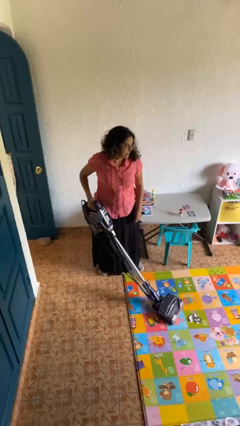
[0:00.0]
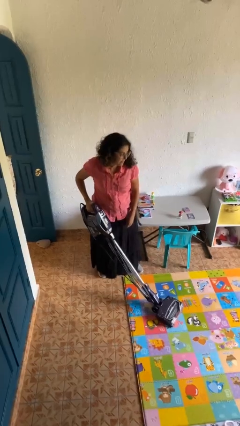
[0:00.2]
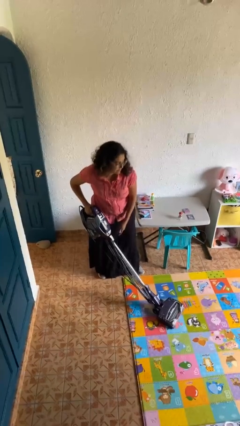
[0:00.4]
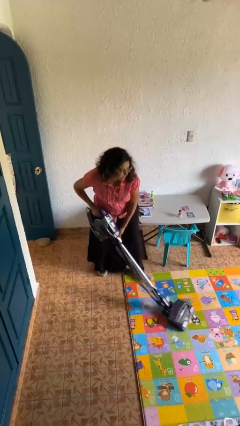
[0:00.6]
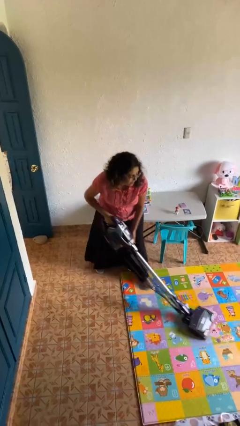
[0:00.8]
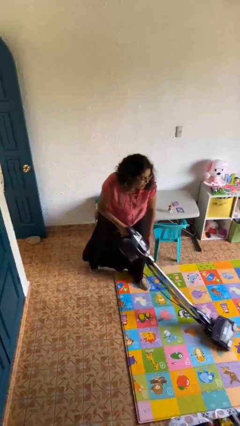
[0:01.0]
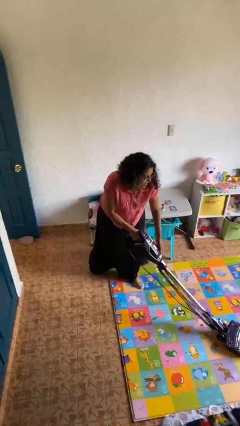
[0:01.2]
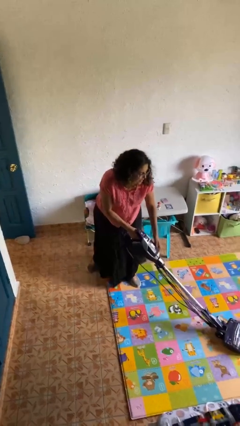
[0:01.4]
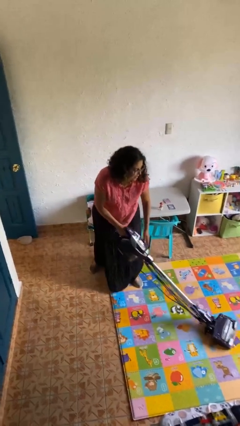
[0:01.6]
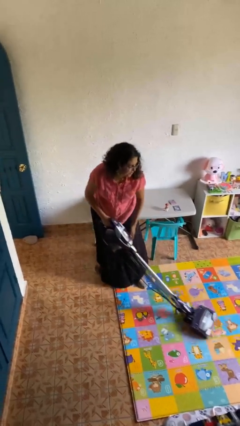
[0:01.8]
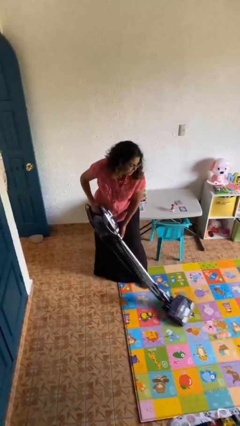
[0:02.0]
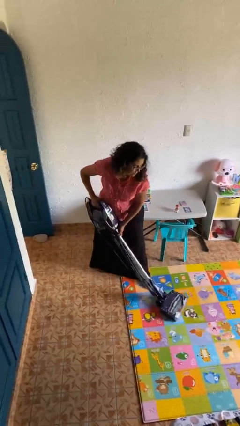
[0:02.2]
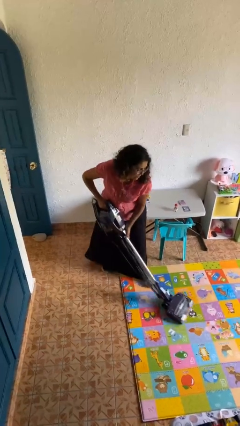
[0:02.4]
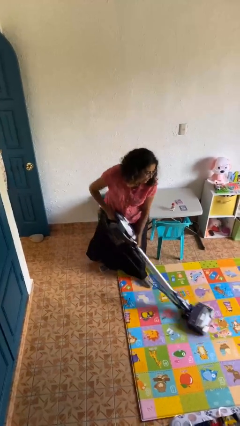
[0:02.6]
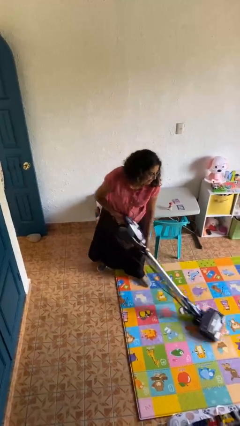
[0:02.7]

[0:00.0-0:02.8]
person vacuums carpet

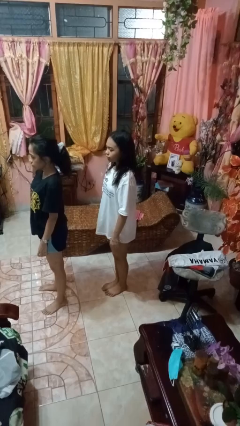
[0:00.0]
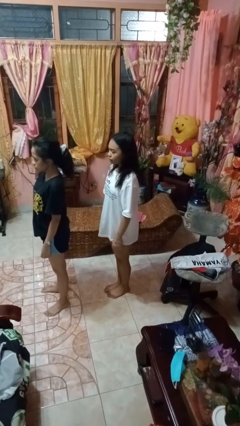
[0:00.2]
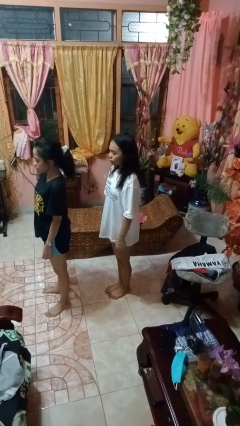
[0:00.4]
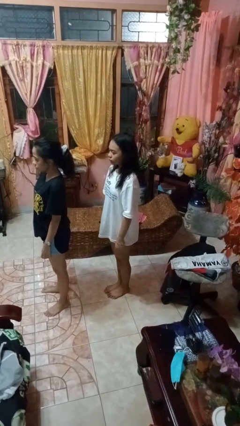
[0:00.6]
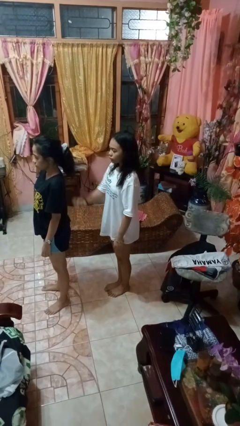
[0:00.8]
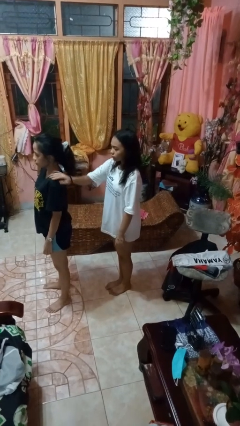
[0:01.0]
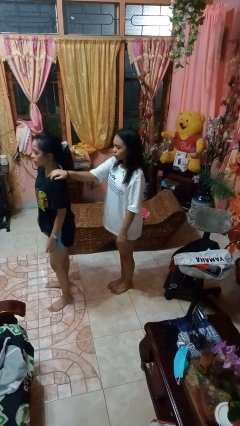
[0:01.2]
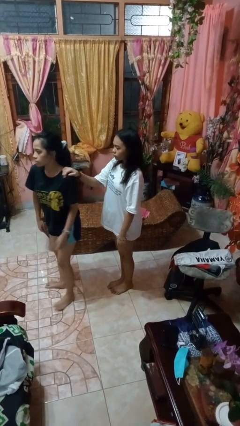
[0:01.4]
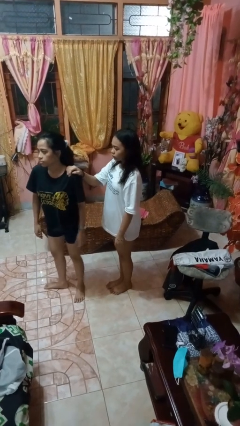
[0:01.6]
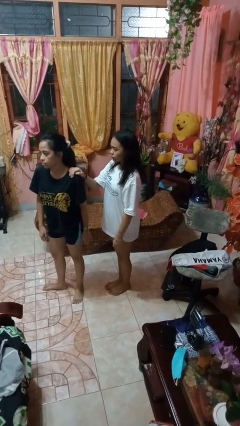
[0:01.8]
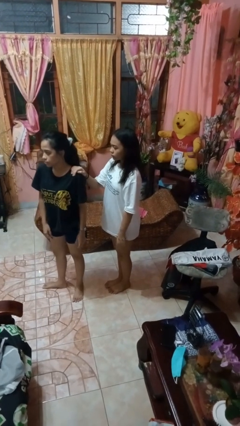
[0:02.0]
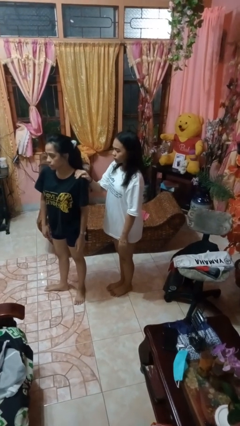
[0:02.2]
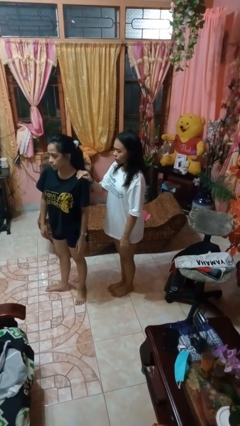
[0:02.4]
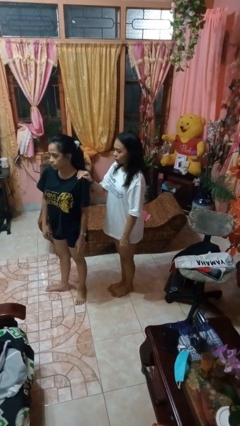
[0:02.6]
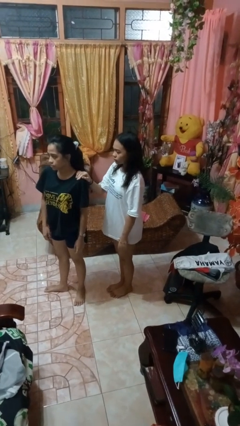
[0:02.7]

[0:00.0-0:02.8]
person grabs person by shoulder

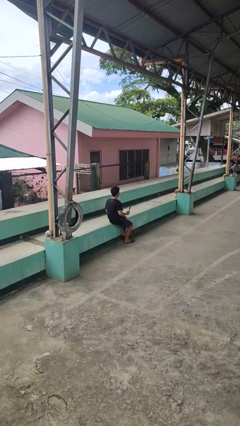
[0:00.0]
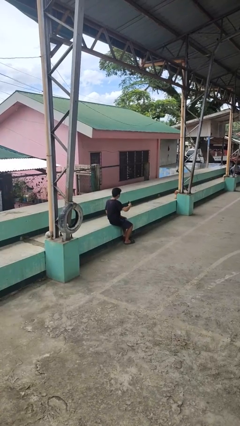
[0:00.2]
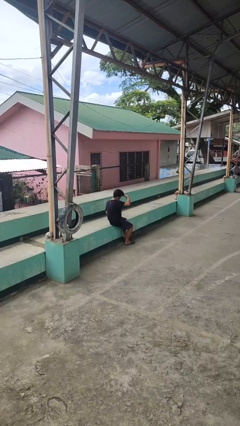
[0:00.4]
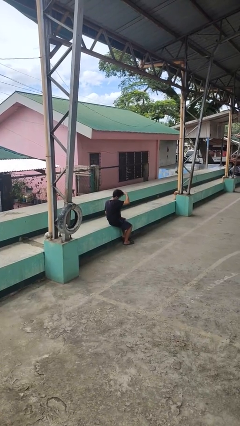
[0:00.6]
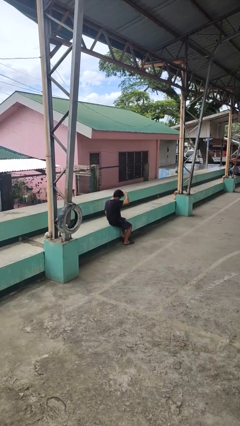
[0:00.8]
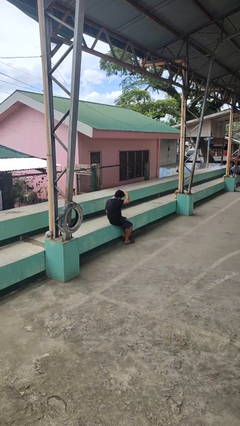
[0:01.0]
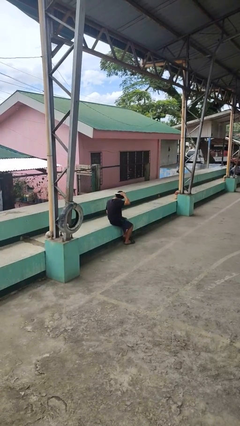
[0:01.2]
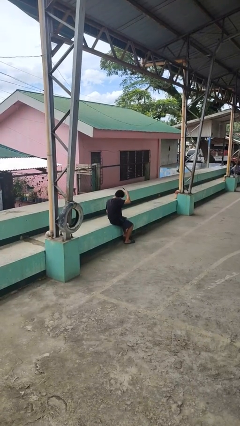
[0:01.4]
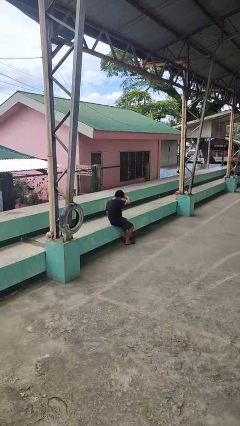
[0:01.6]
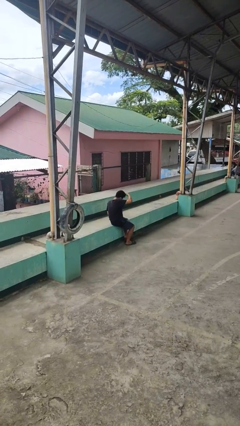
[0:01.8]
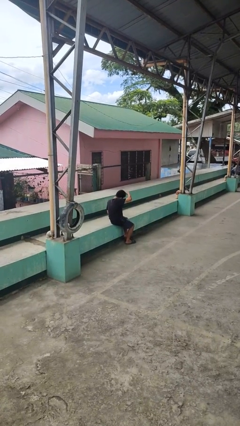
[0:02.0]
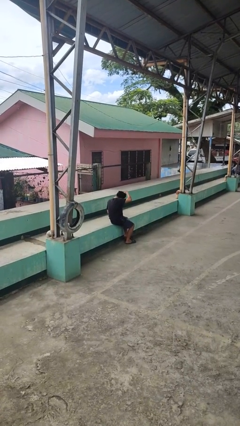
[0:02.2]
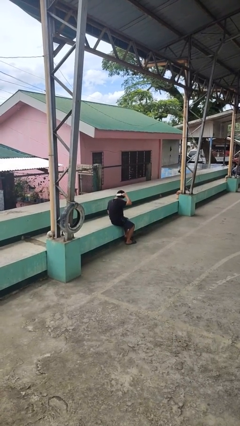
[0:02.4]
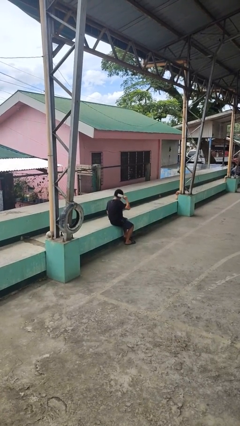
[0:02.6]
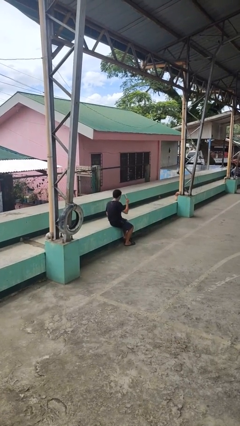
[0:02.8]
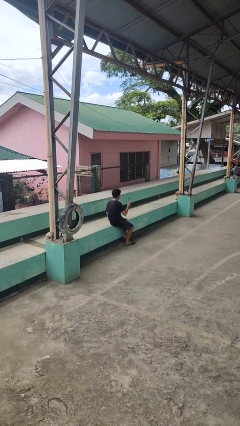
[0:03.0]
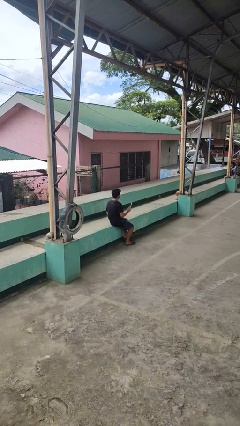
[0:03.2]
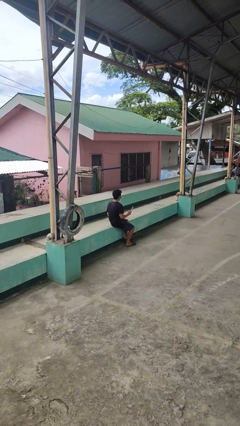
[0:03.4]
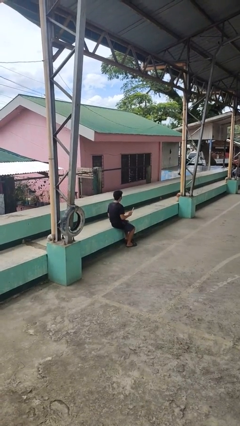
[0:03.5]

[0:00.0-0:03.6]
person brushes hair

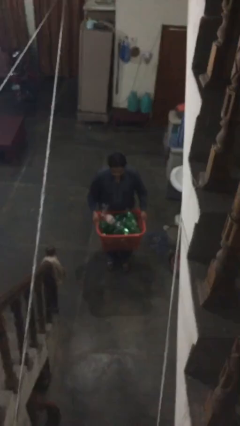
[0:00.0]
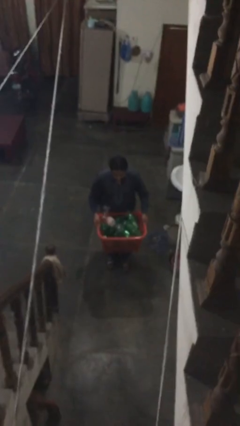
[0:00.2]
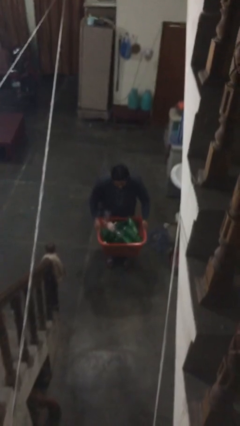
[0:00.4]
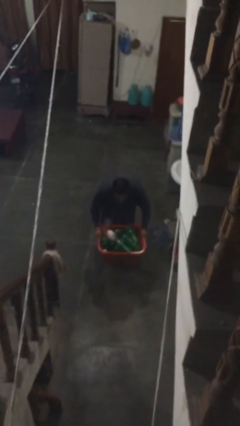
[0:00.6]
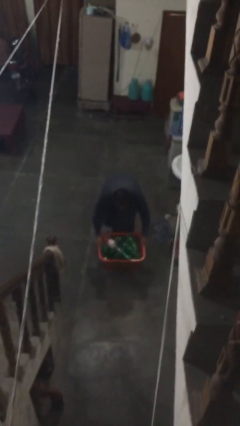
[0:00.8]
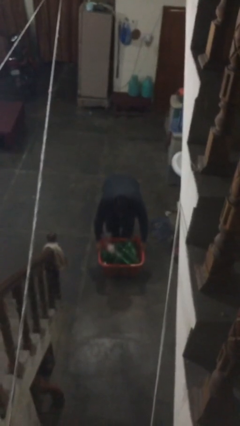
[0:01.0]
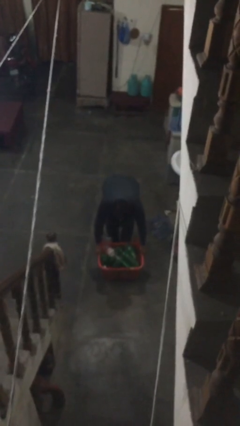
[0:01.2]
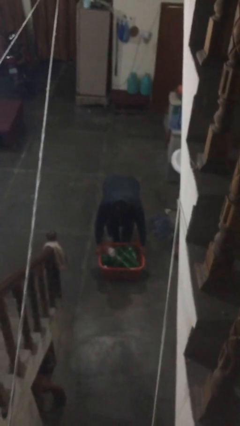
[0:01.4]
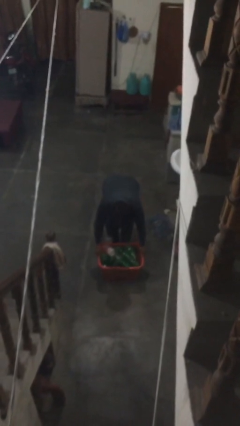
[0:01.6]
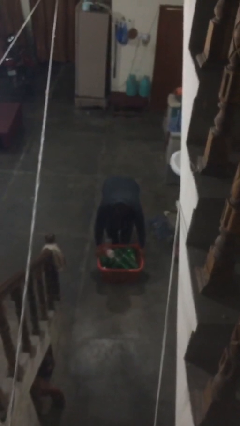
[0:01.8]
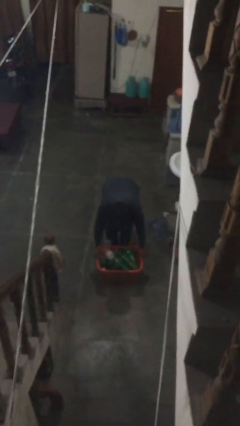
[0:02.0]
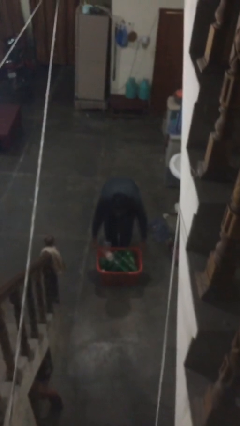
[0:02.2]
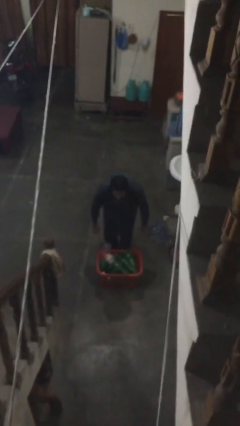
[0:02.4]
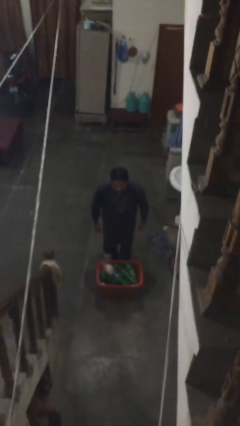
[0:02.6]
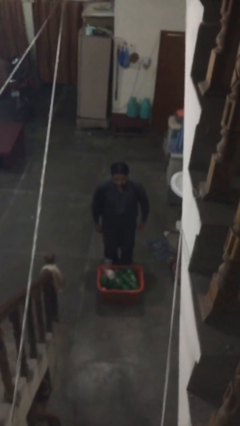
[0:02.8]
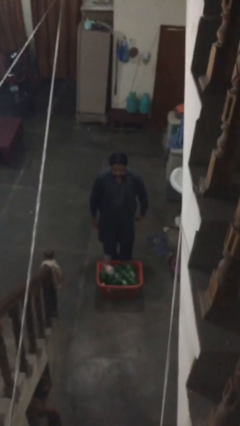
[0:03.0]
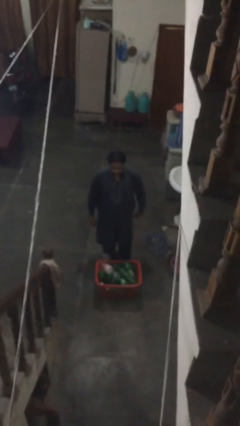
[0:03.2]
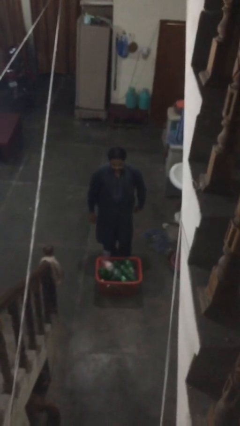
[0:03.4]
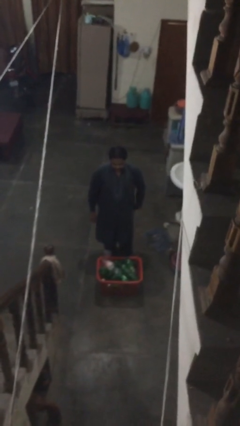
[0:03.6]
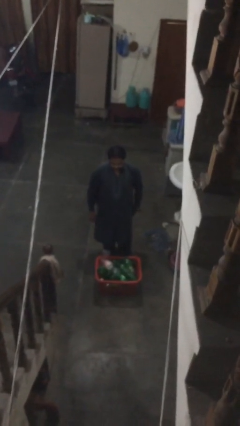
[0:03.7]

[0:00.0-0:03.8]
person puts down object on floor

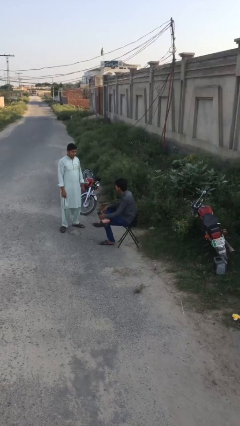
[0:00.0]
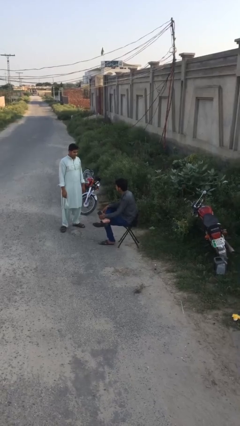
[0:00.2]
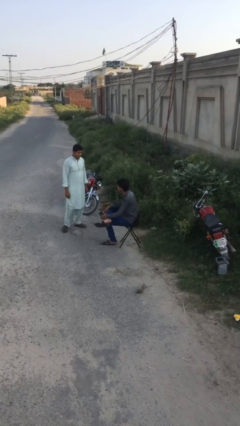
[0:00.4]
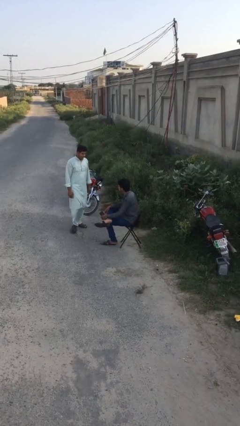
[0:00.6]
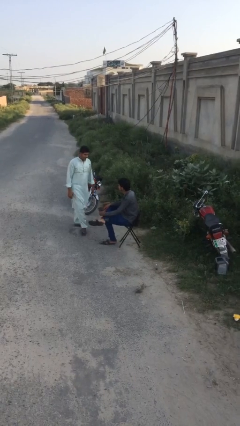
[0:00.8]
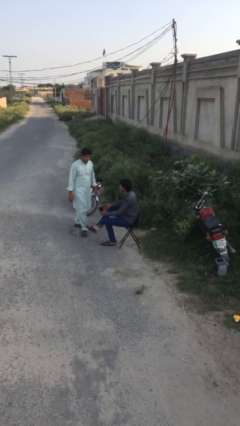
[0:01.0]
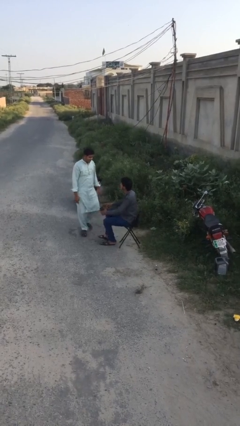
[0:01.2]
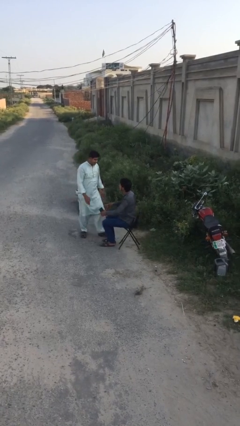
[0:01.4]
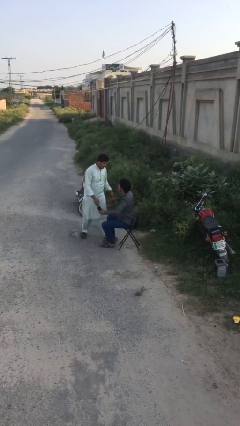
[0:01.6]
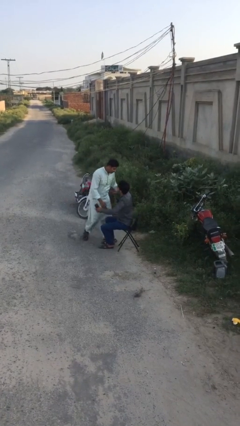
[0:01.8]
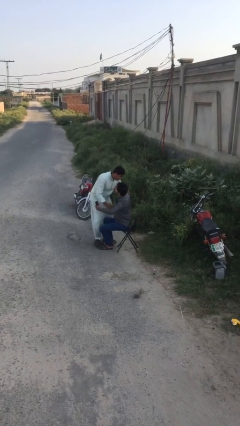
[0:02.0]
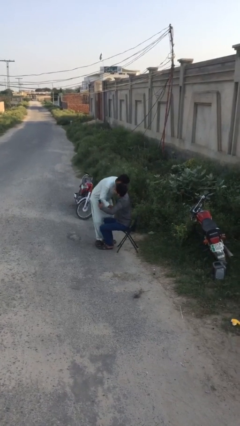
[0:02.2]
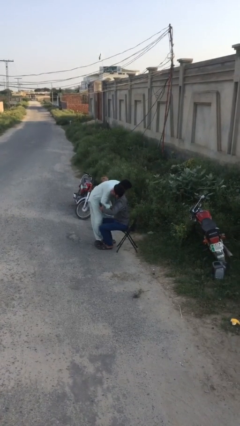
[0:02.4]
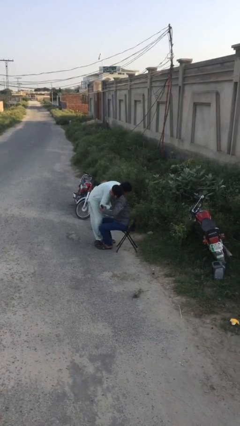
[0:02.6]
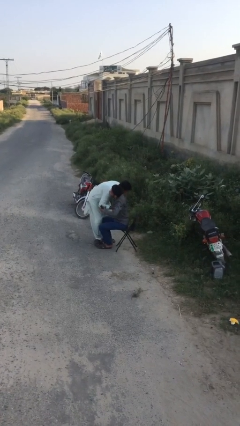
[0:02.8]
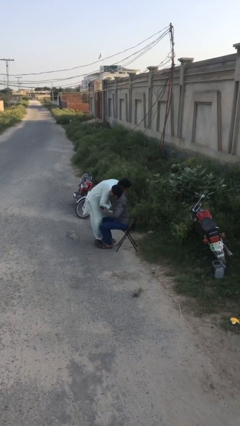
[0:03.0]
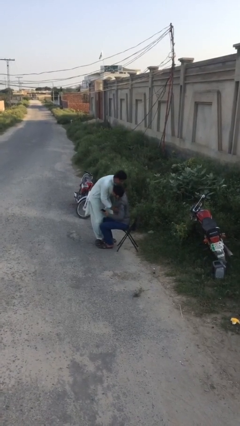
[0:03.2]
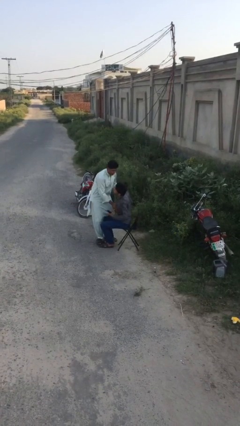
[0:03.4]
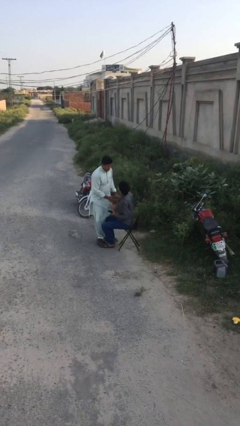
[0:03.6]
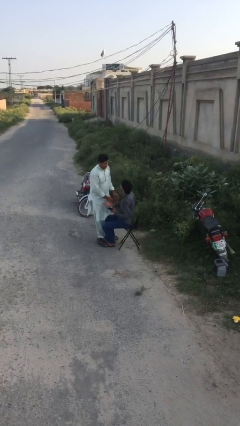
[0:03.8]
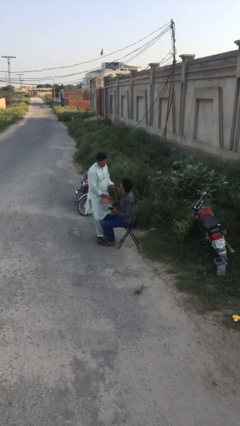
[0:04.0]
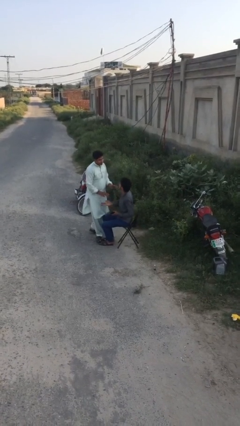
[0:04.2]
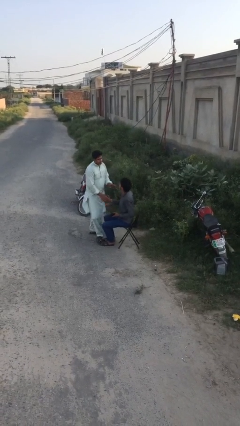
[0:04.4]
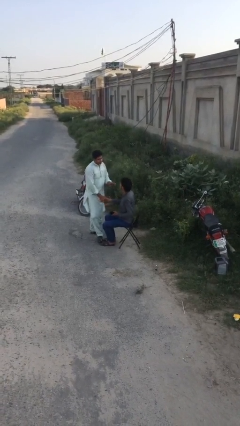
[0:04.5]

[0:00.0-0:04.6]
person embraces person
